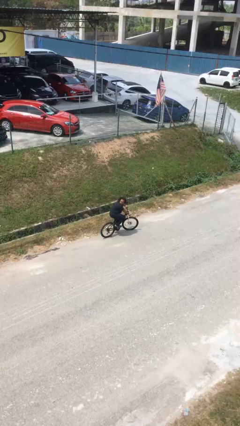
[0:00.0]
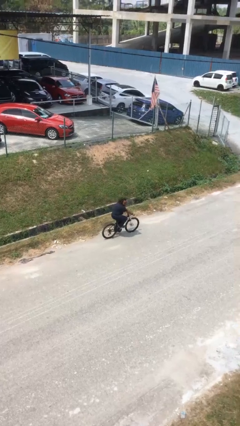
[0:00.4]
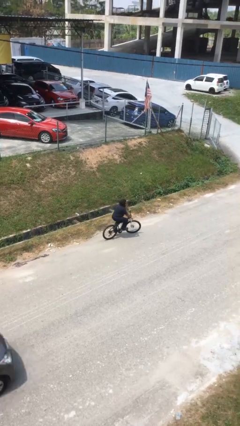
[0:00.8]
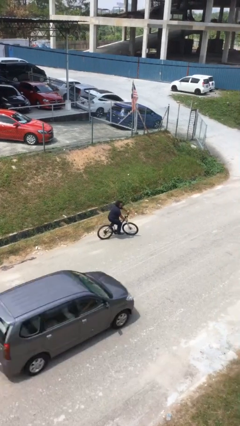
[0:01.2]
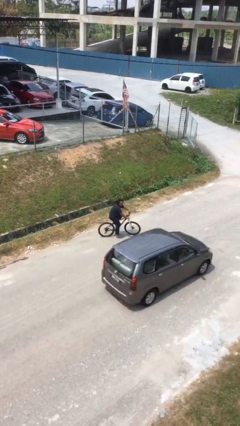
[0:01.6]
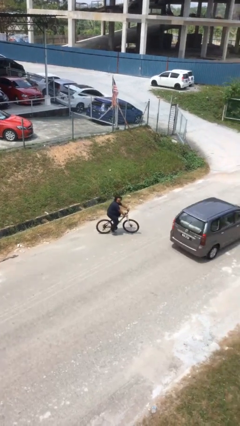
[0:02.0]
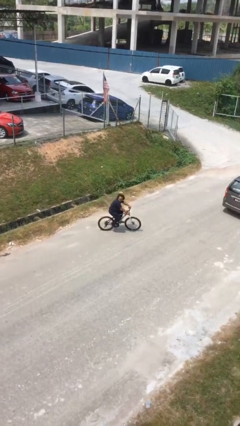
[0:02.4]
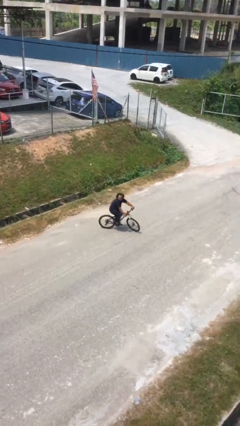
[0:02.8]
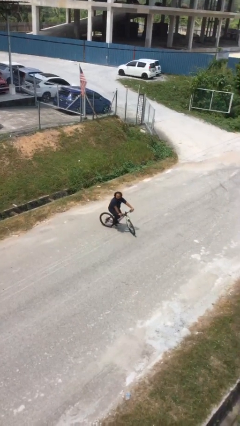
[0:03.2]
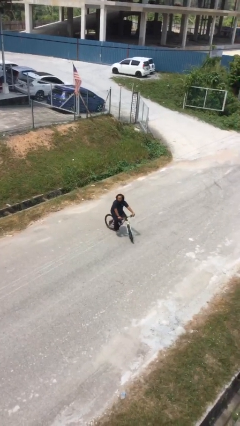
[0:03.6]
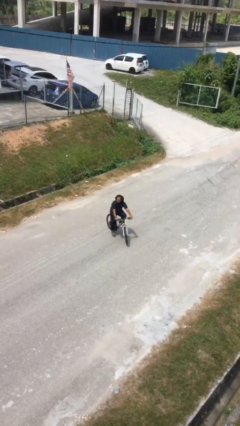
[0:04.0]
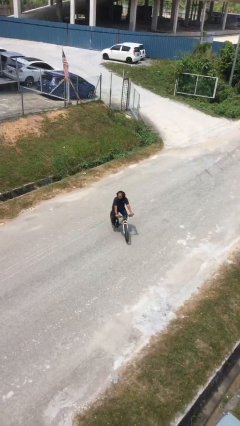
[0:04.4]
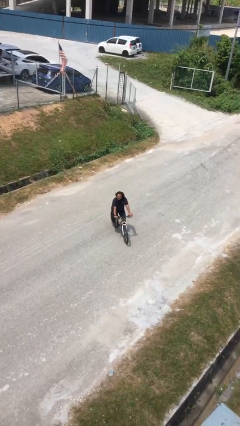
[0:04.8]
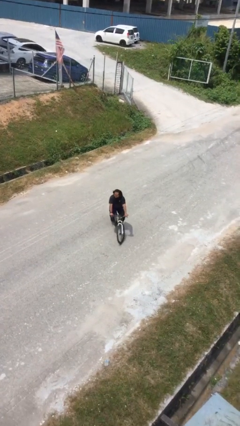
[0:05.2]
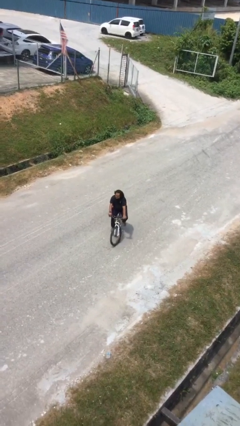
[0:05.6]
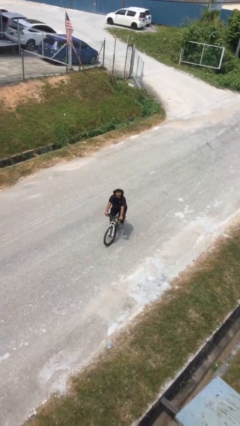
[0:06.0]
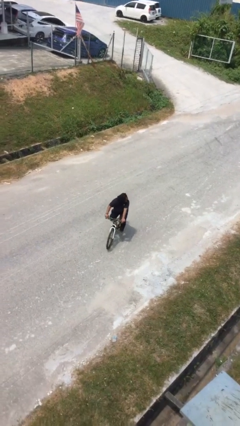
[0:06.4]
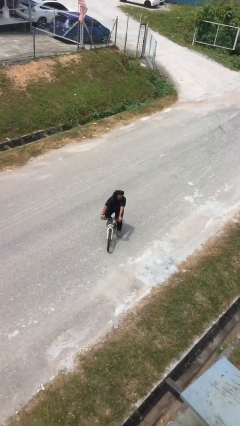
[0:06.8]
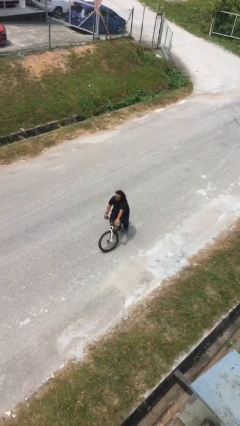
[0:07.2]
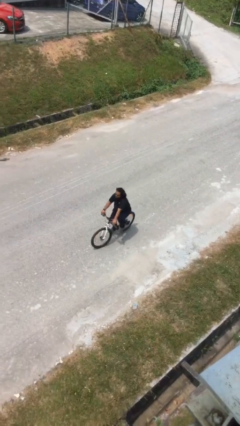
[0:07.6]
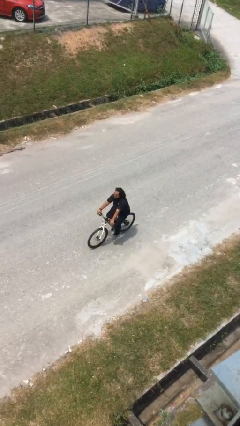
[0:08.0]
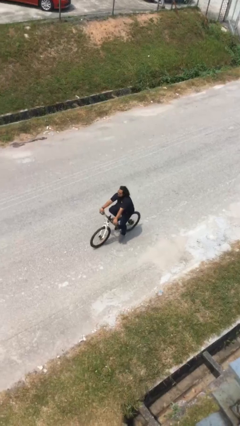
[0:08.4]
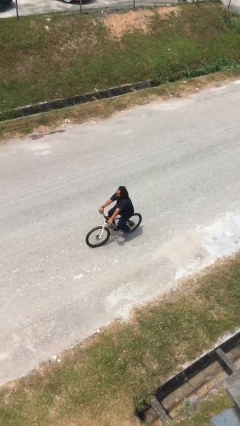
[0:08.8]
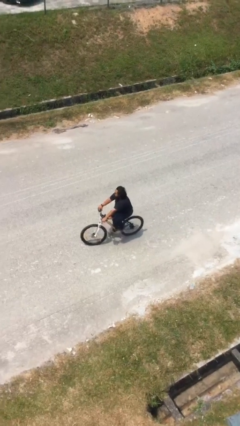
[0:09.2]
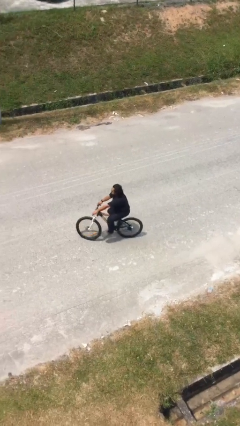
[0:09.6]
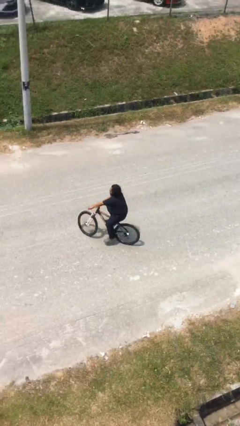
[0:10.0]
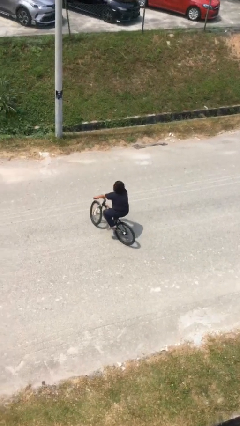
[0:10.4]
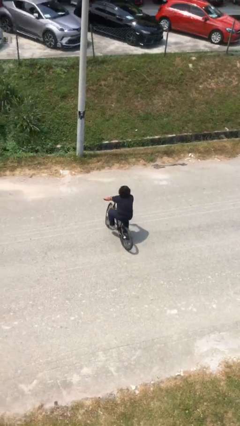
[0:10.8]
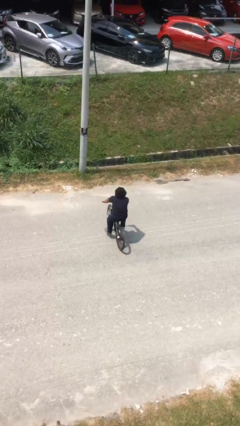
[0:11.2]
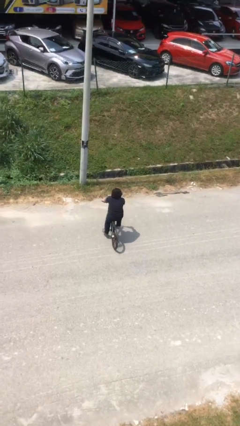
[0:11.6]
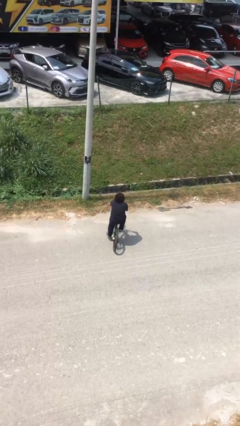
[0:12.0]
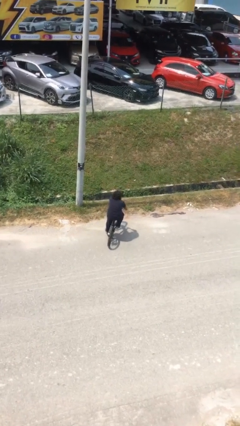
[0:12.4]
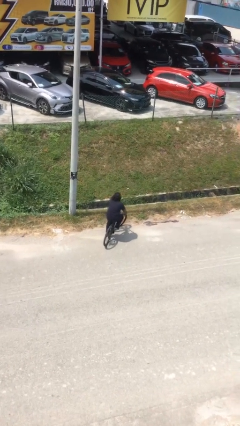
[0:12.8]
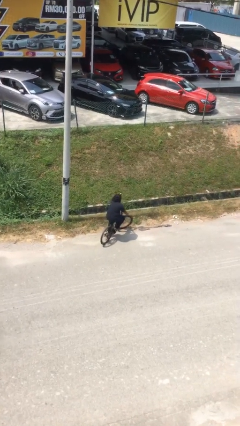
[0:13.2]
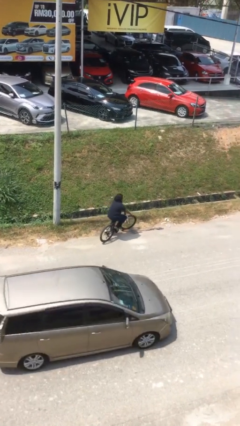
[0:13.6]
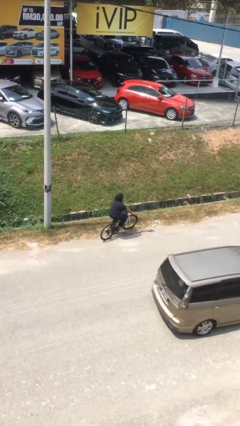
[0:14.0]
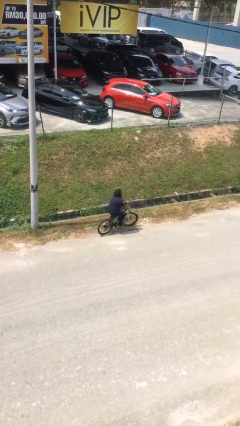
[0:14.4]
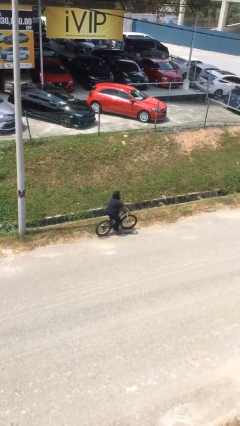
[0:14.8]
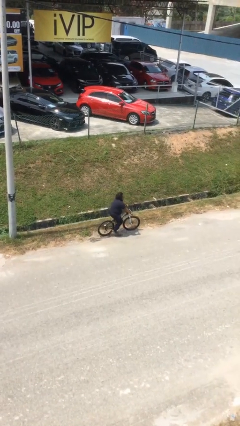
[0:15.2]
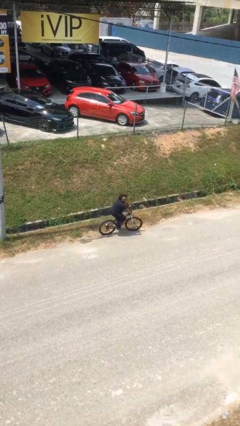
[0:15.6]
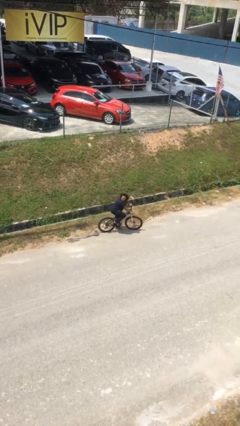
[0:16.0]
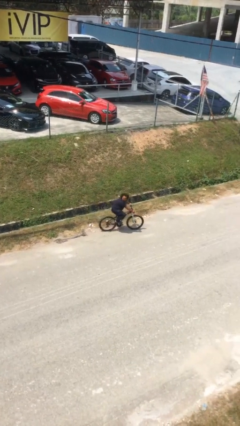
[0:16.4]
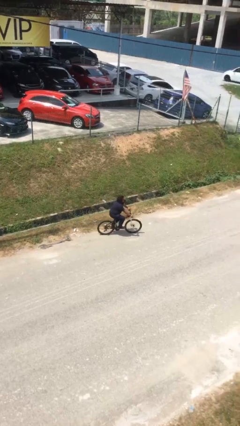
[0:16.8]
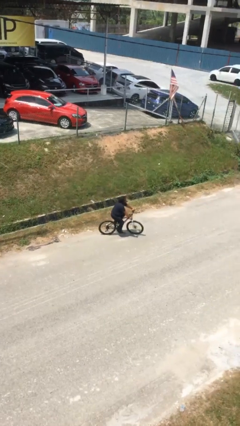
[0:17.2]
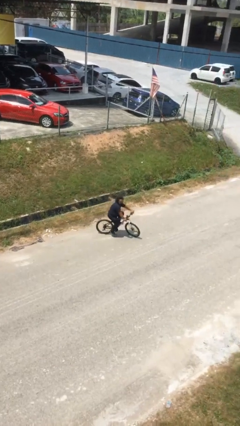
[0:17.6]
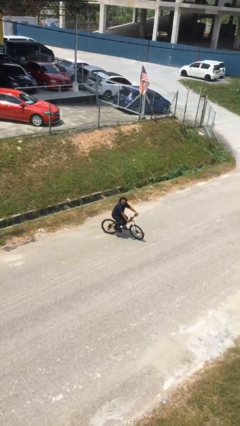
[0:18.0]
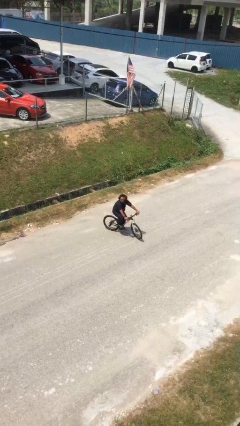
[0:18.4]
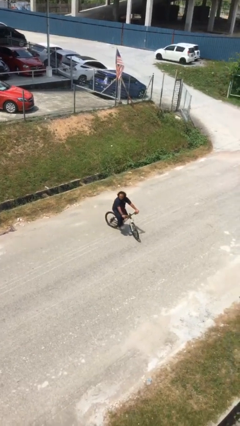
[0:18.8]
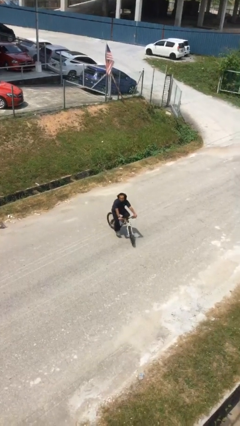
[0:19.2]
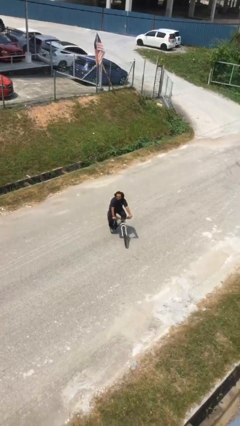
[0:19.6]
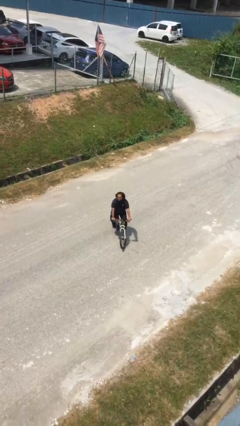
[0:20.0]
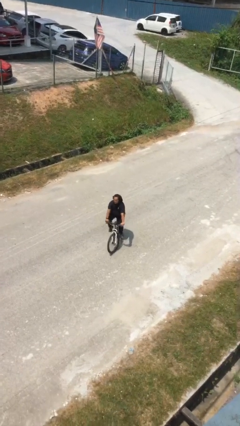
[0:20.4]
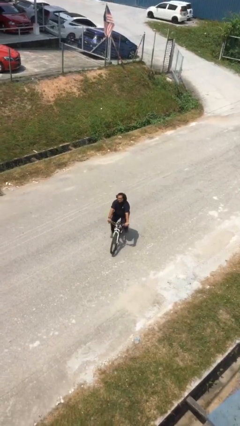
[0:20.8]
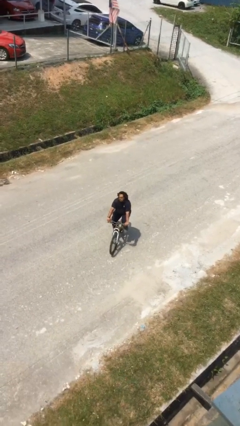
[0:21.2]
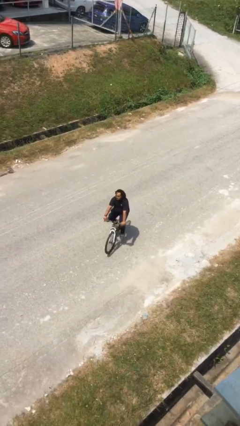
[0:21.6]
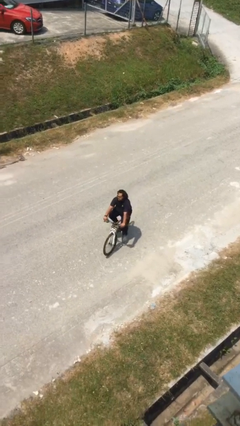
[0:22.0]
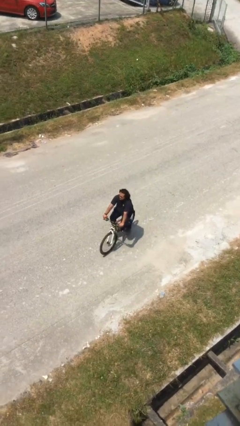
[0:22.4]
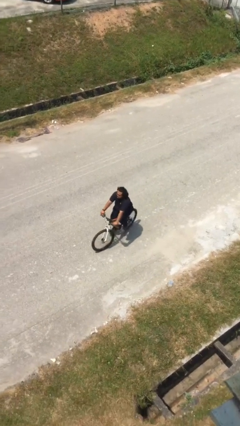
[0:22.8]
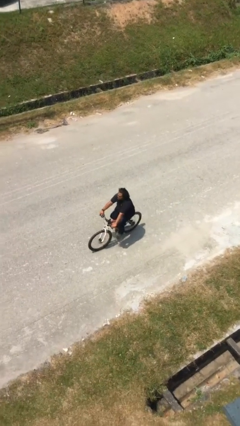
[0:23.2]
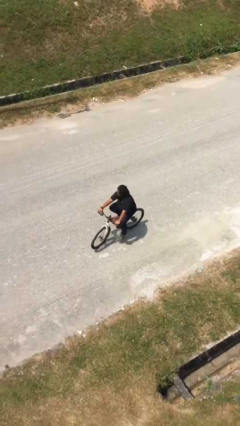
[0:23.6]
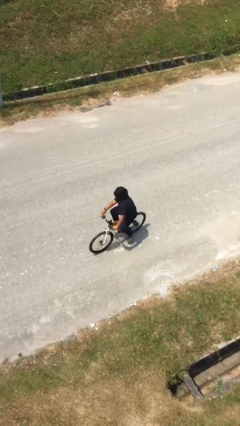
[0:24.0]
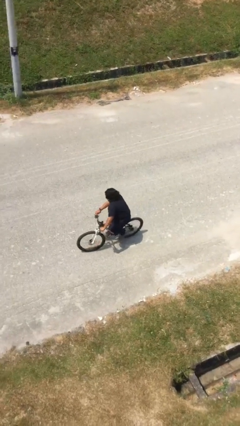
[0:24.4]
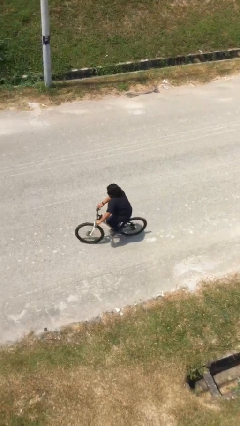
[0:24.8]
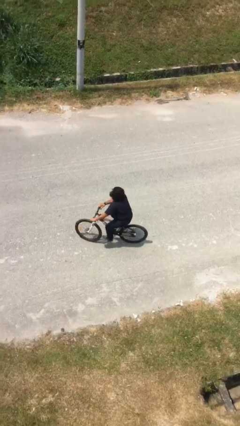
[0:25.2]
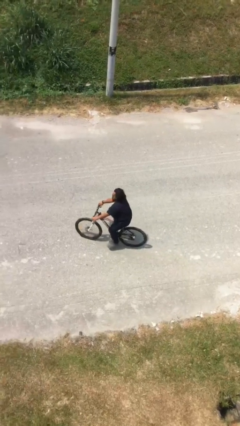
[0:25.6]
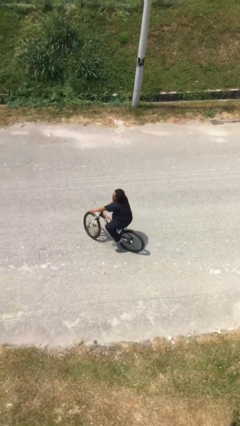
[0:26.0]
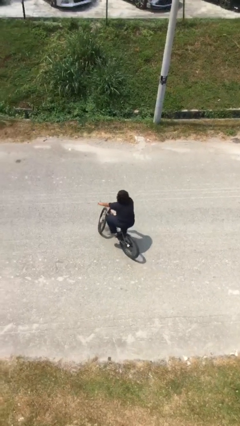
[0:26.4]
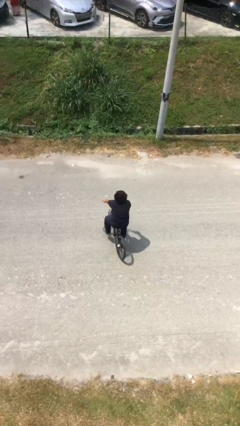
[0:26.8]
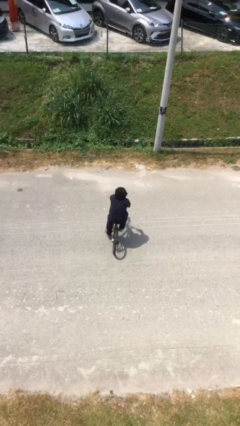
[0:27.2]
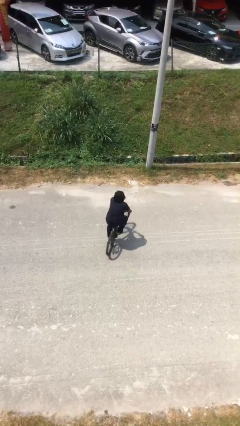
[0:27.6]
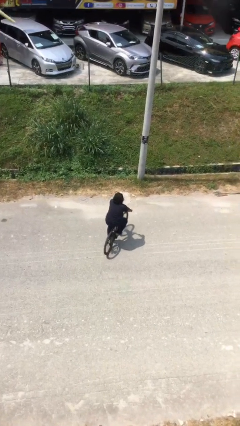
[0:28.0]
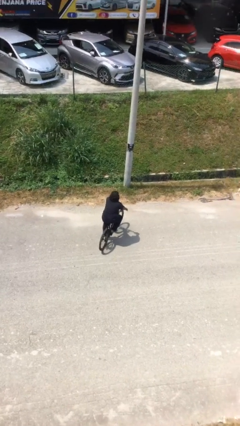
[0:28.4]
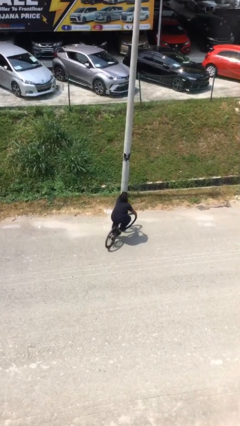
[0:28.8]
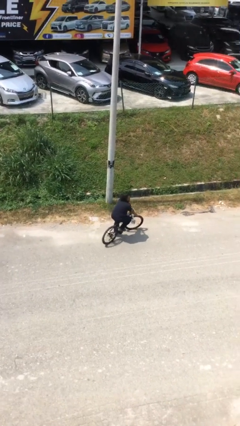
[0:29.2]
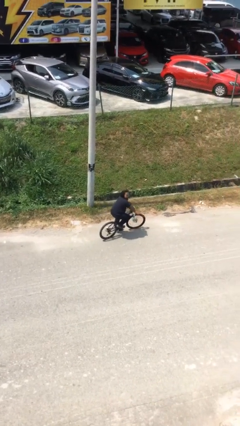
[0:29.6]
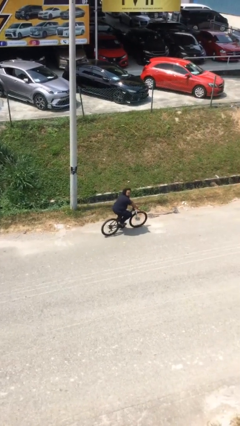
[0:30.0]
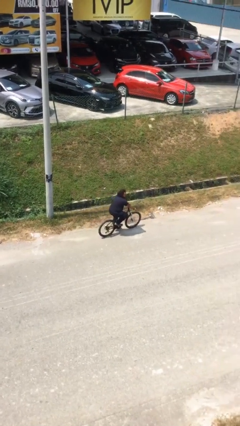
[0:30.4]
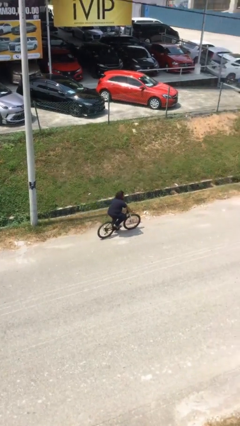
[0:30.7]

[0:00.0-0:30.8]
person rides bicycle

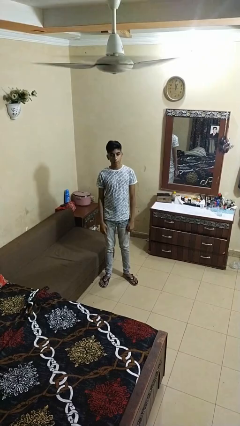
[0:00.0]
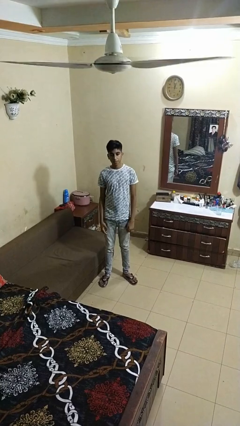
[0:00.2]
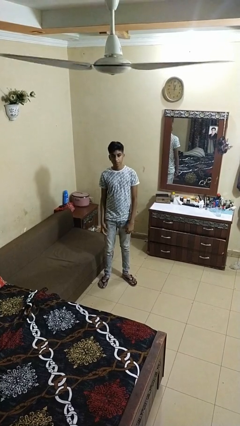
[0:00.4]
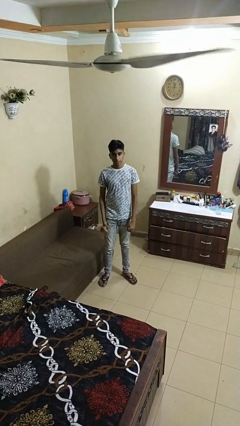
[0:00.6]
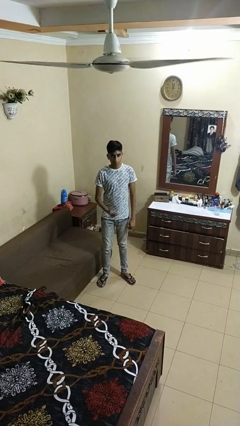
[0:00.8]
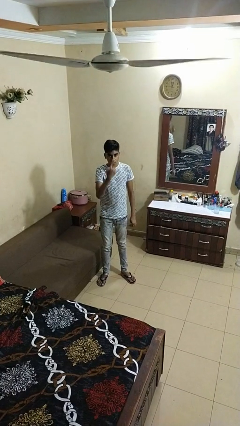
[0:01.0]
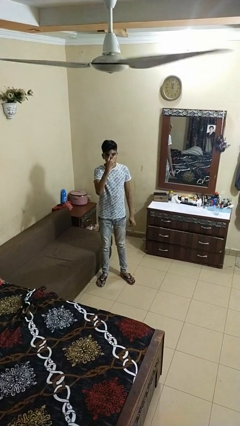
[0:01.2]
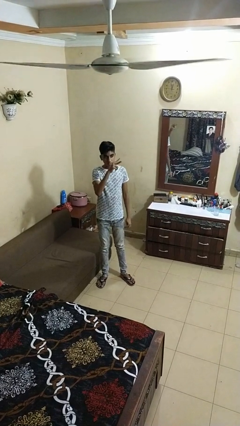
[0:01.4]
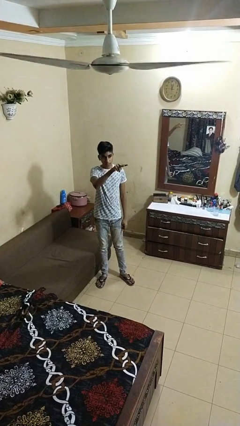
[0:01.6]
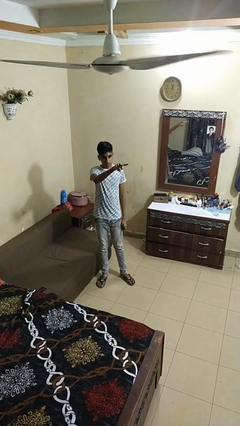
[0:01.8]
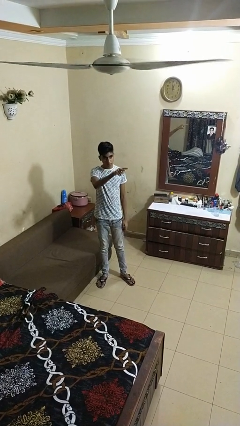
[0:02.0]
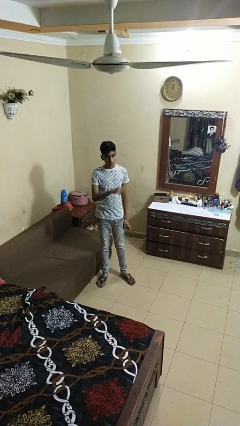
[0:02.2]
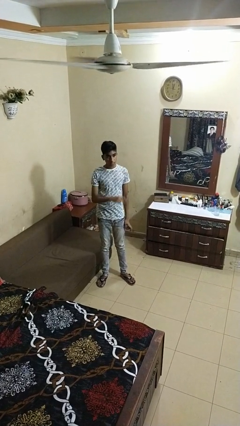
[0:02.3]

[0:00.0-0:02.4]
person gestures watch closely

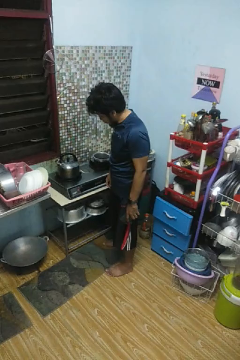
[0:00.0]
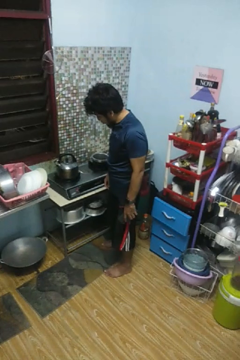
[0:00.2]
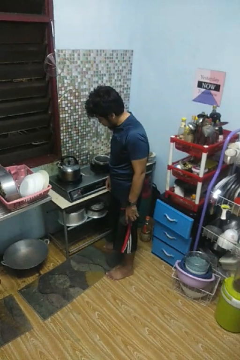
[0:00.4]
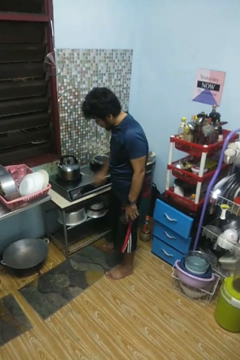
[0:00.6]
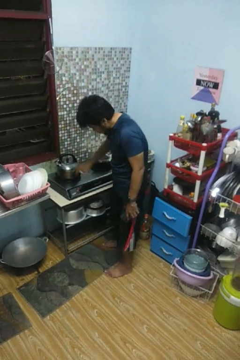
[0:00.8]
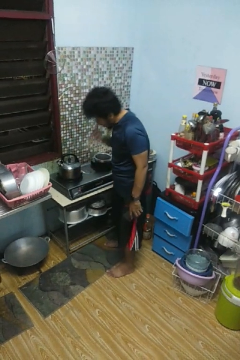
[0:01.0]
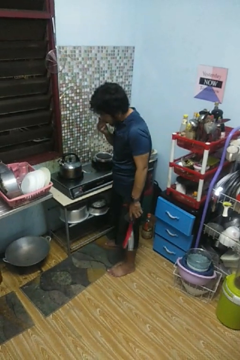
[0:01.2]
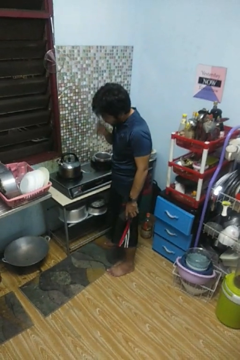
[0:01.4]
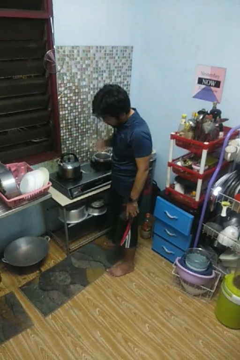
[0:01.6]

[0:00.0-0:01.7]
person burns hand
